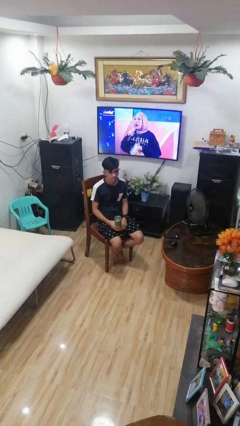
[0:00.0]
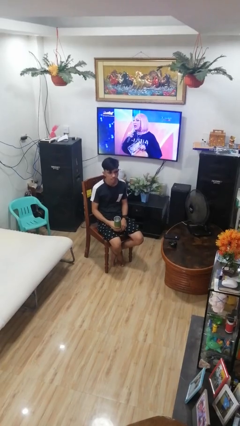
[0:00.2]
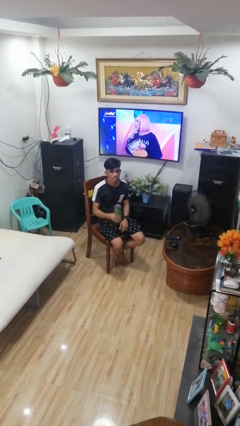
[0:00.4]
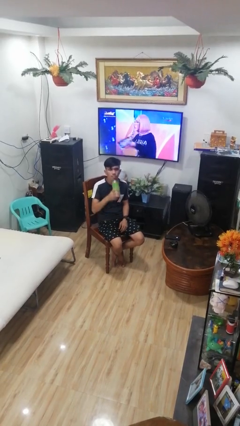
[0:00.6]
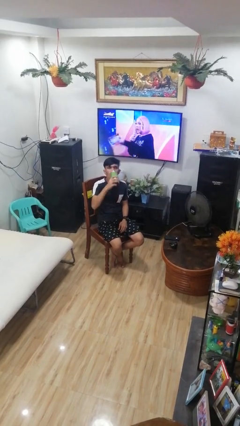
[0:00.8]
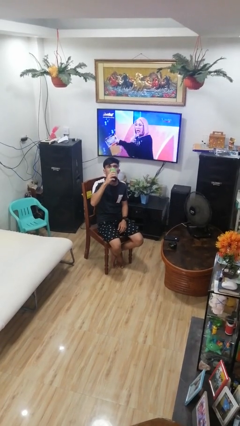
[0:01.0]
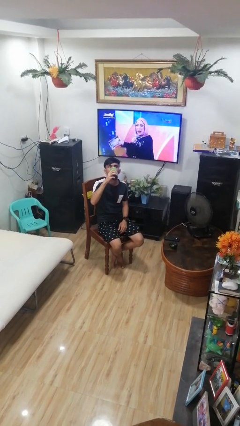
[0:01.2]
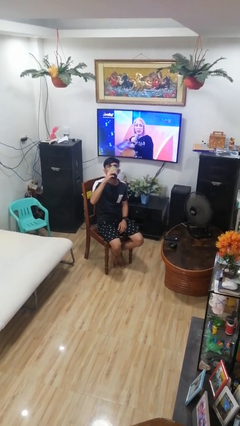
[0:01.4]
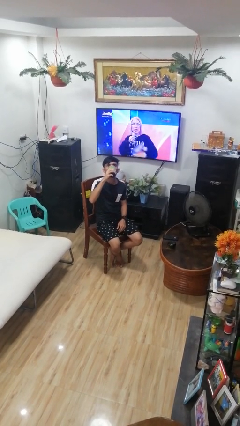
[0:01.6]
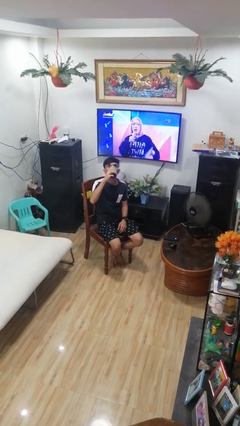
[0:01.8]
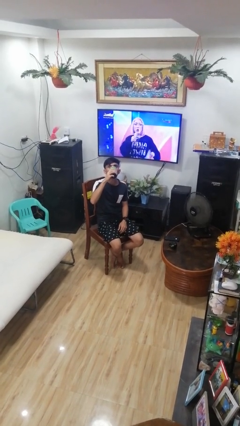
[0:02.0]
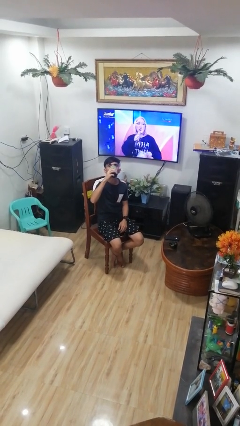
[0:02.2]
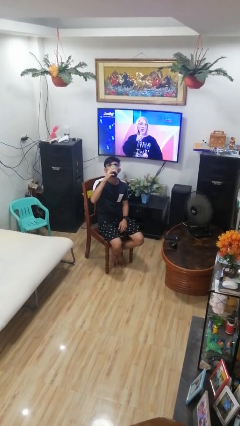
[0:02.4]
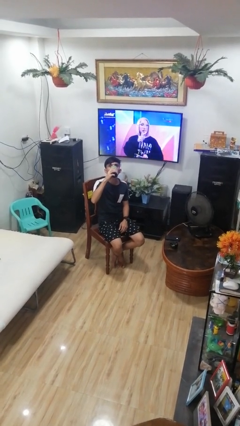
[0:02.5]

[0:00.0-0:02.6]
person drinks from bottle

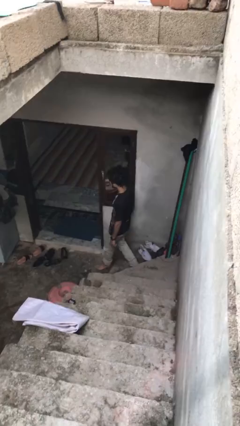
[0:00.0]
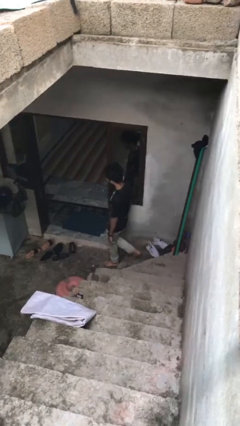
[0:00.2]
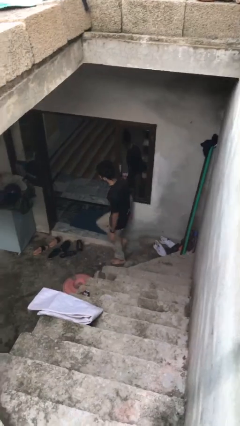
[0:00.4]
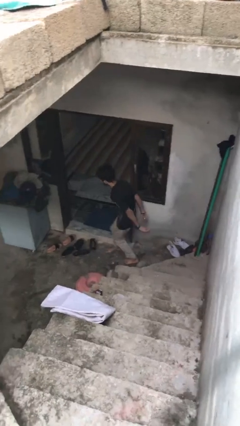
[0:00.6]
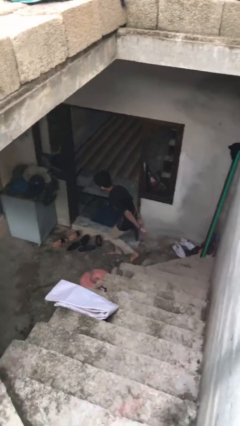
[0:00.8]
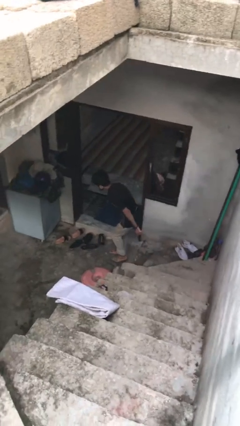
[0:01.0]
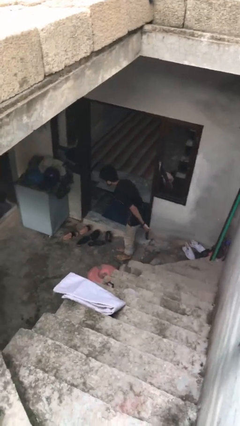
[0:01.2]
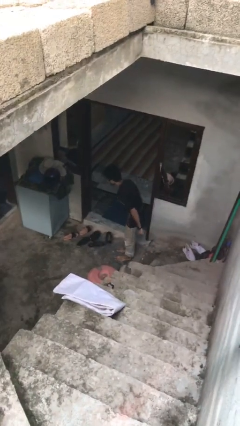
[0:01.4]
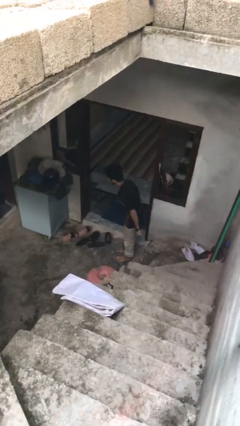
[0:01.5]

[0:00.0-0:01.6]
person trips on stair

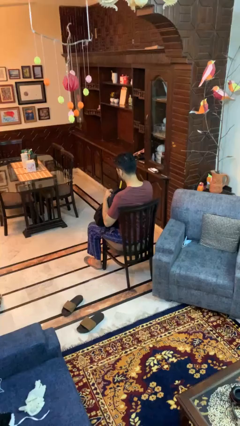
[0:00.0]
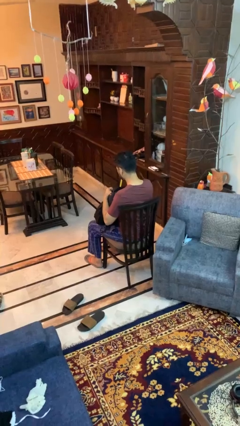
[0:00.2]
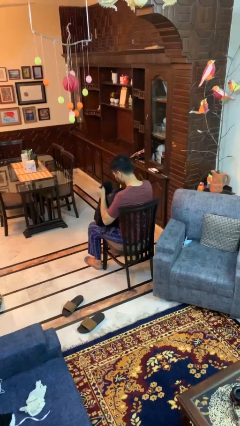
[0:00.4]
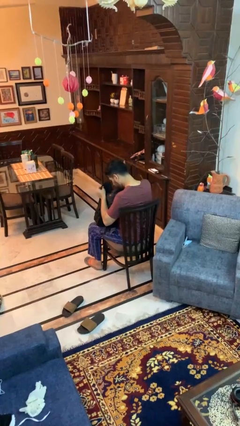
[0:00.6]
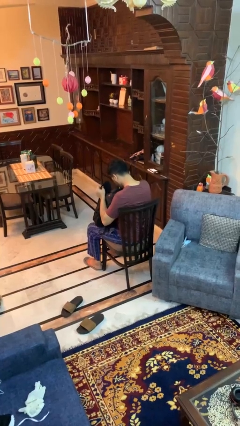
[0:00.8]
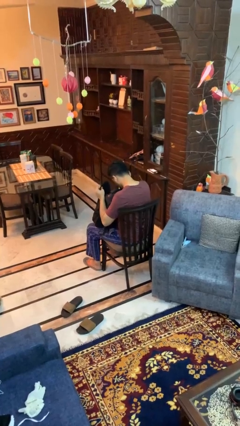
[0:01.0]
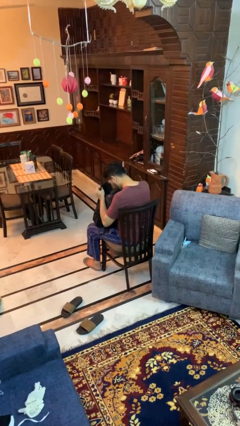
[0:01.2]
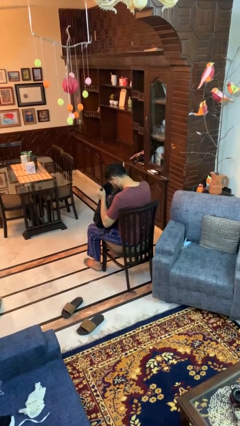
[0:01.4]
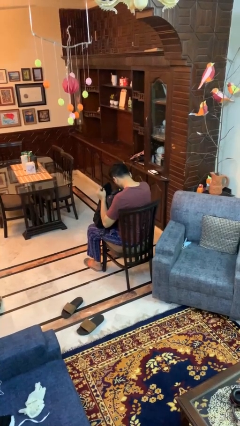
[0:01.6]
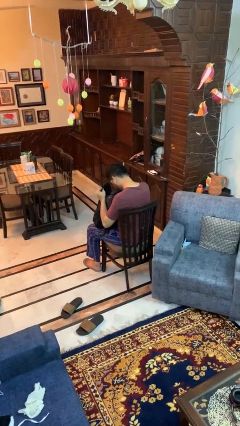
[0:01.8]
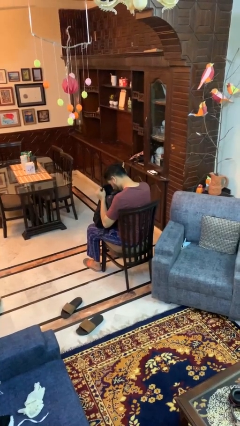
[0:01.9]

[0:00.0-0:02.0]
person searches in backpack

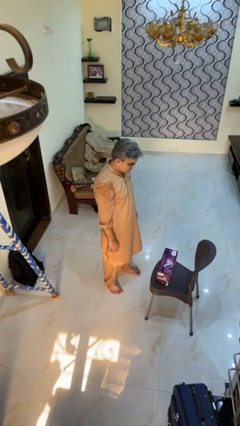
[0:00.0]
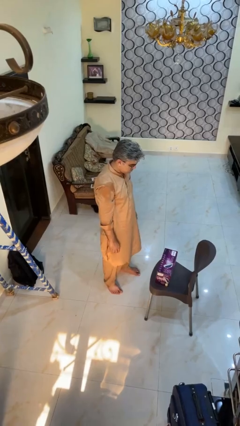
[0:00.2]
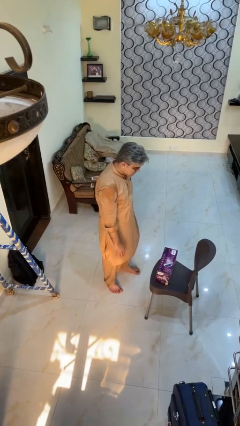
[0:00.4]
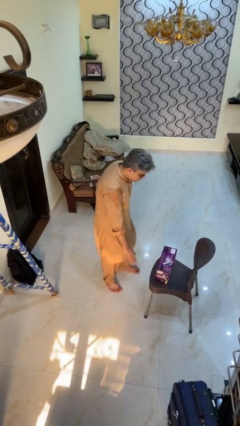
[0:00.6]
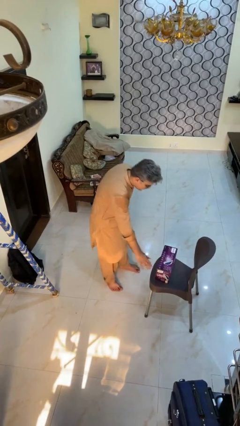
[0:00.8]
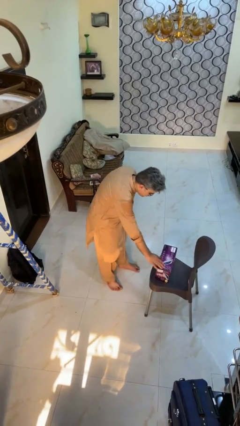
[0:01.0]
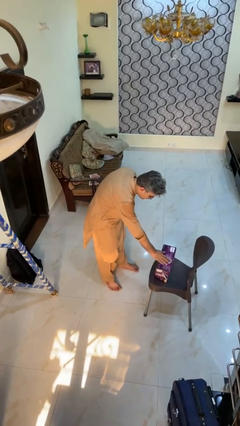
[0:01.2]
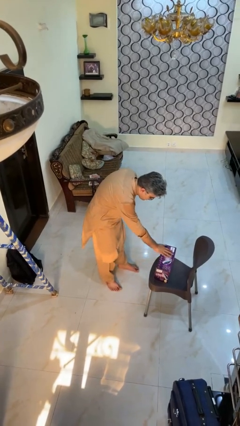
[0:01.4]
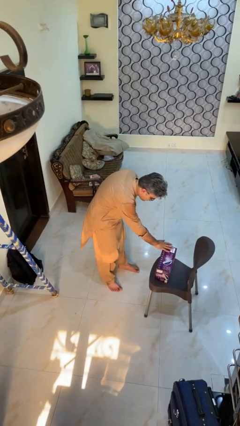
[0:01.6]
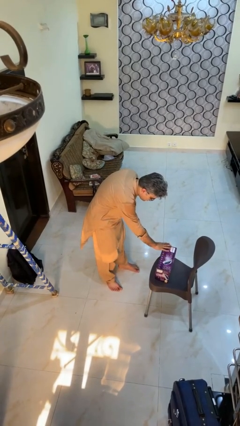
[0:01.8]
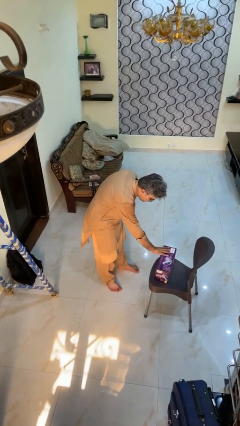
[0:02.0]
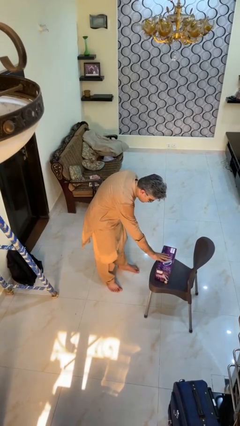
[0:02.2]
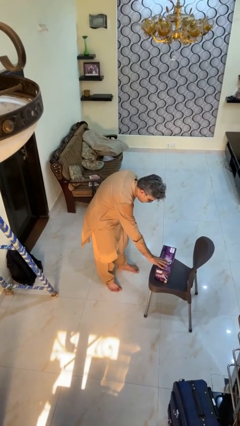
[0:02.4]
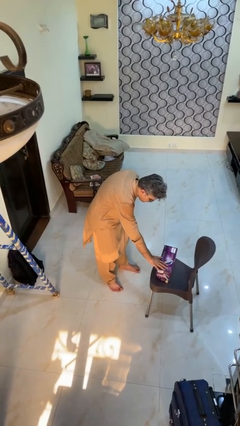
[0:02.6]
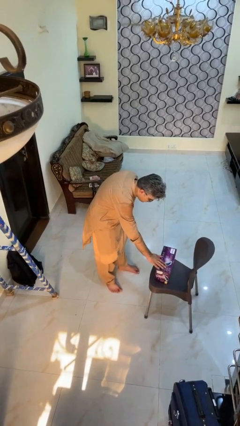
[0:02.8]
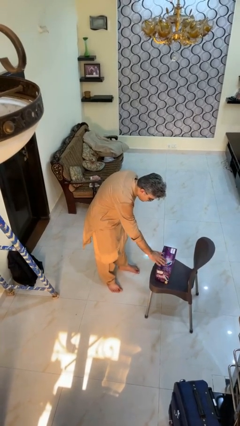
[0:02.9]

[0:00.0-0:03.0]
person waves hand over object

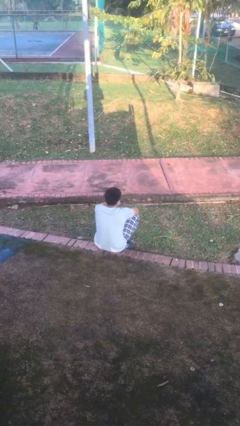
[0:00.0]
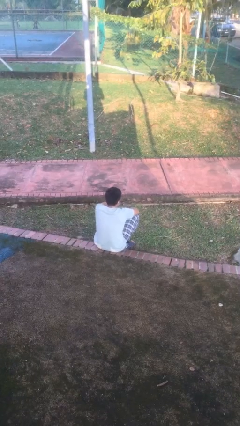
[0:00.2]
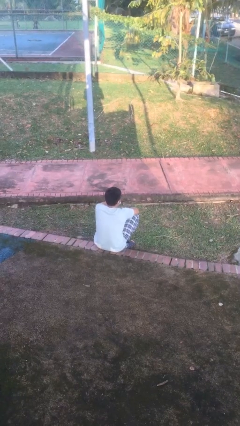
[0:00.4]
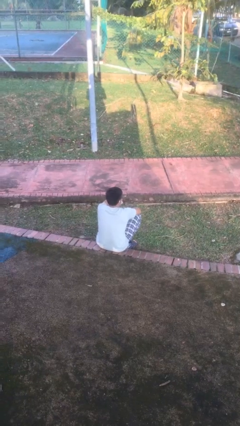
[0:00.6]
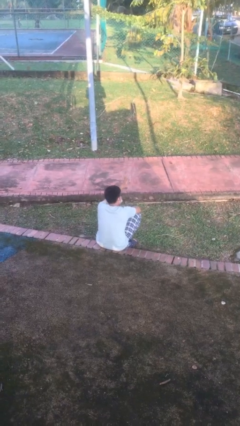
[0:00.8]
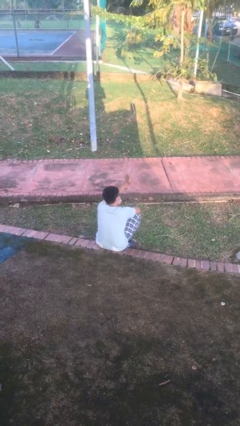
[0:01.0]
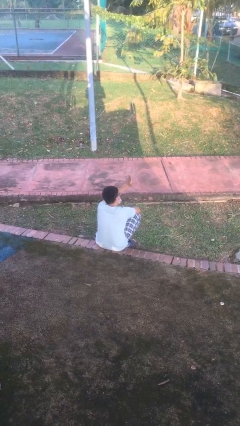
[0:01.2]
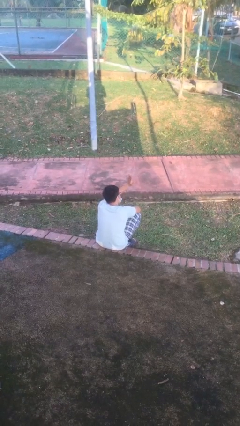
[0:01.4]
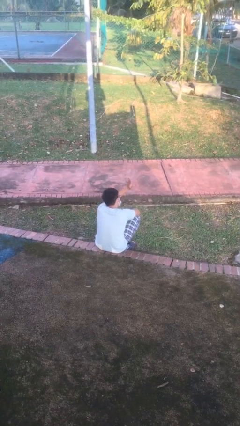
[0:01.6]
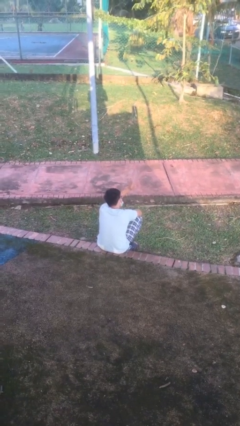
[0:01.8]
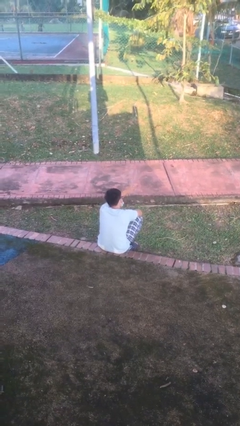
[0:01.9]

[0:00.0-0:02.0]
person gestures stop

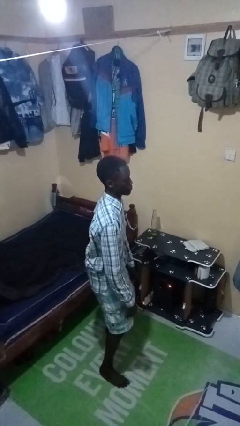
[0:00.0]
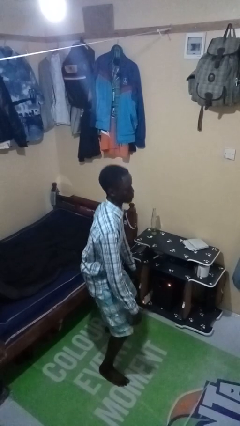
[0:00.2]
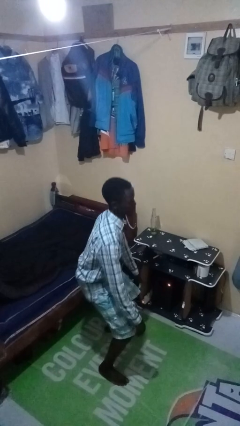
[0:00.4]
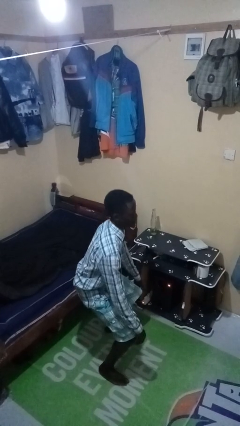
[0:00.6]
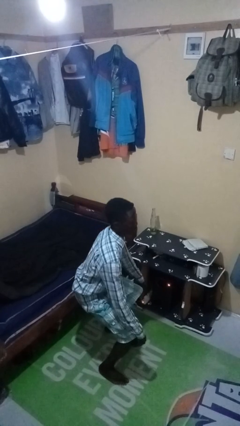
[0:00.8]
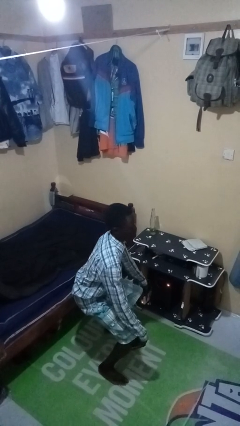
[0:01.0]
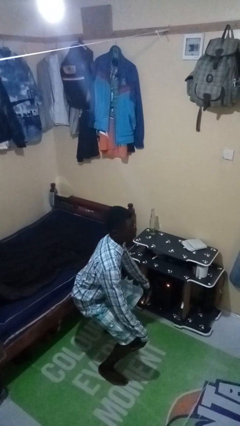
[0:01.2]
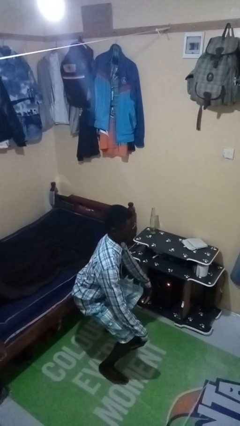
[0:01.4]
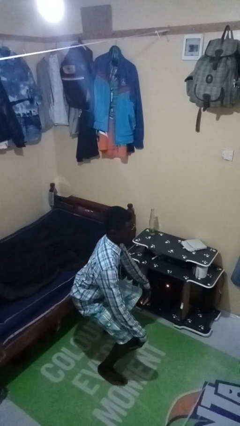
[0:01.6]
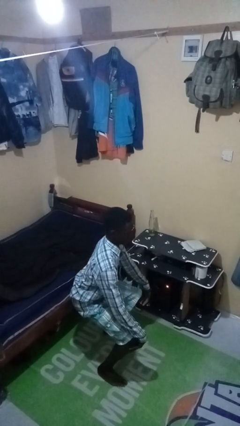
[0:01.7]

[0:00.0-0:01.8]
person squats

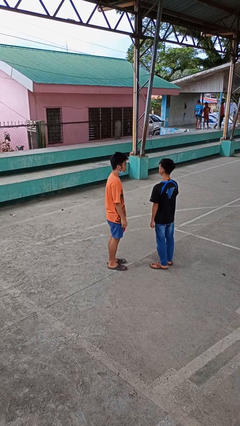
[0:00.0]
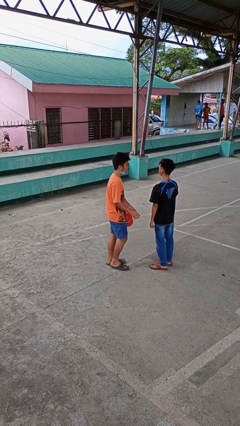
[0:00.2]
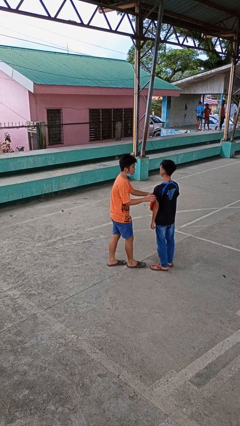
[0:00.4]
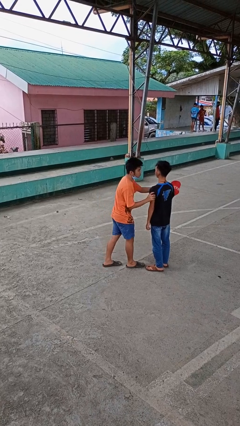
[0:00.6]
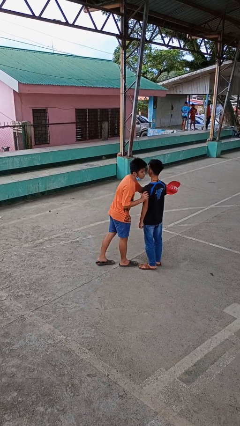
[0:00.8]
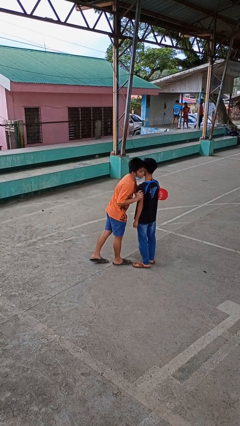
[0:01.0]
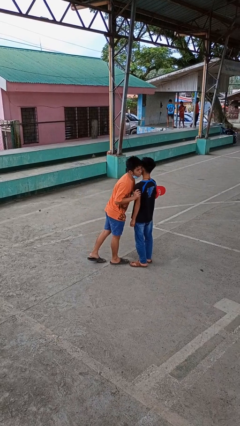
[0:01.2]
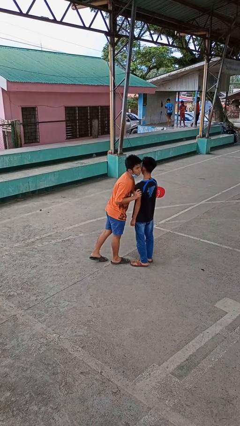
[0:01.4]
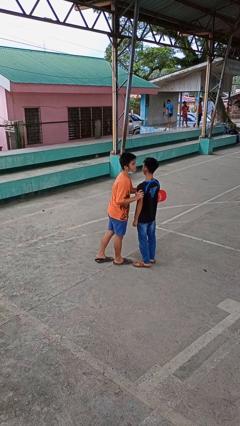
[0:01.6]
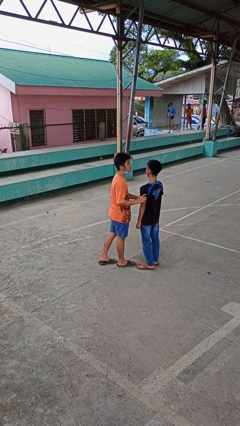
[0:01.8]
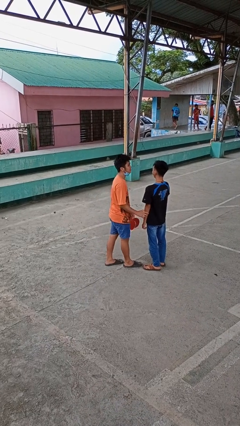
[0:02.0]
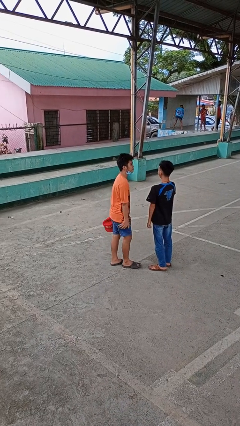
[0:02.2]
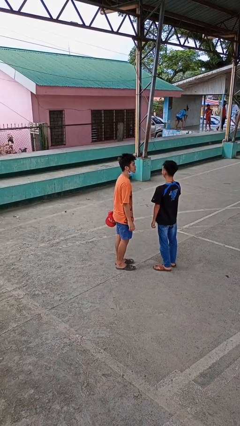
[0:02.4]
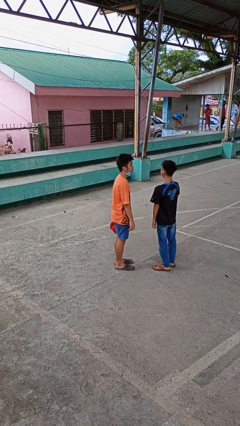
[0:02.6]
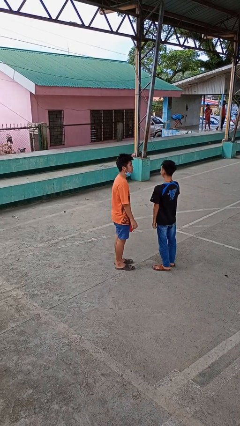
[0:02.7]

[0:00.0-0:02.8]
person kisses cheek of person

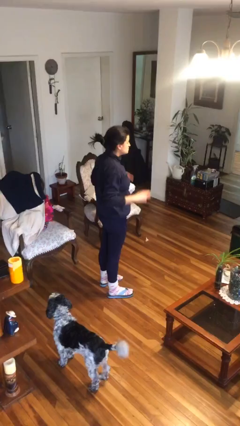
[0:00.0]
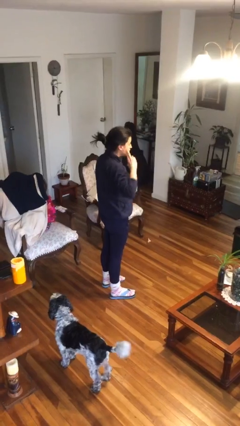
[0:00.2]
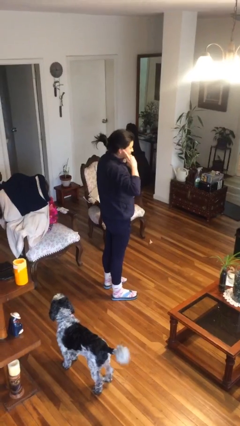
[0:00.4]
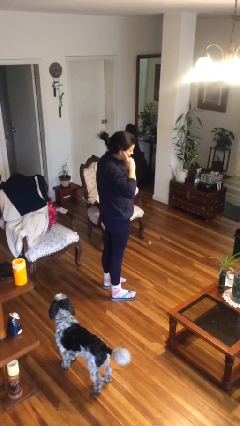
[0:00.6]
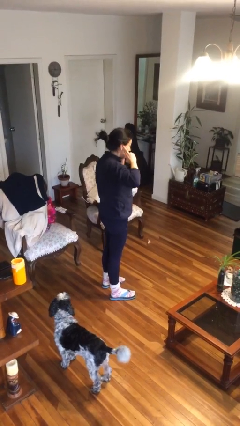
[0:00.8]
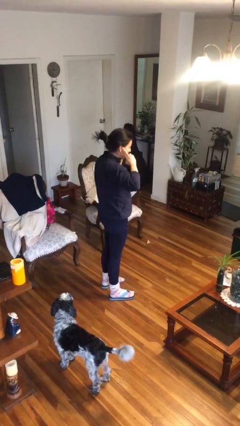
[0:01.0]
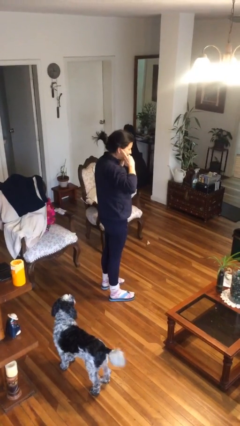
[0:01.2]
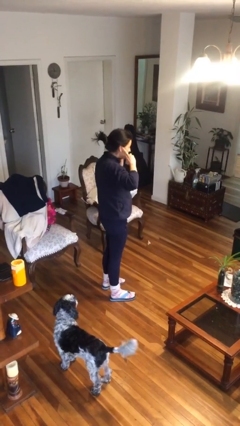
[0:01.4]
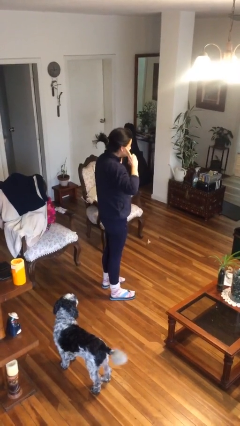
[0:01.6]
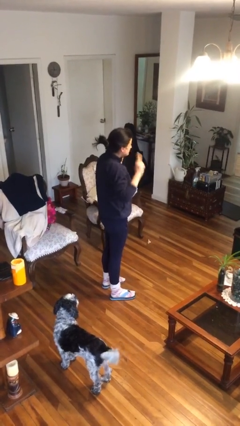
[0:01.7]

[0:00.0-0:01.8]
person puts fingers in ear
